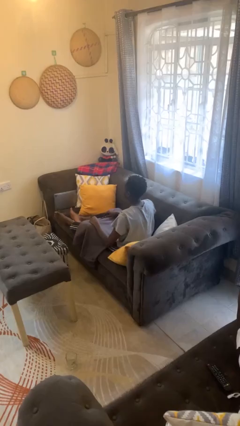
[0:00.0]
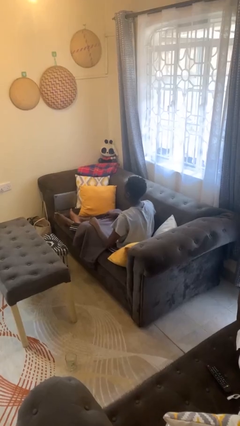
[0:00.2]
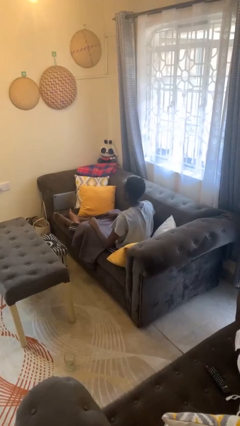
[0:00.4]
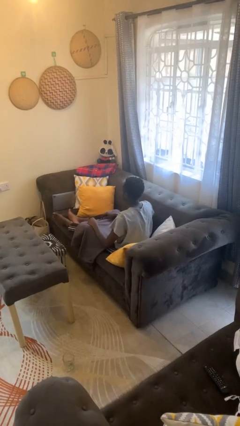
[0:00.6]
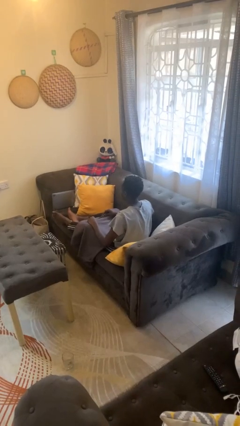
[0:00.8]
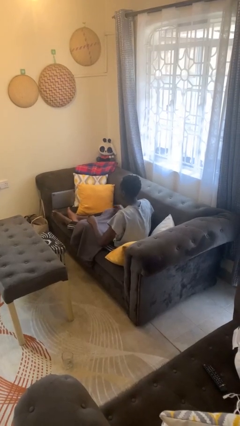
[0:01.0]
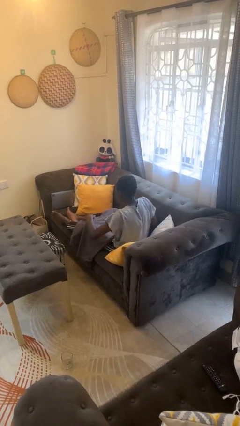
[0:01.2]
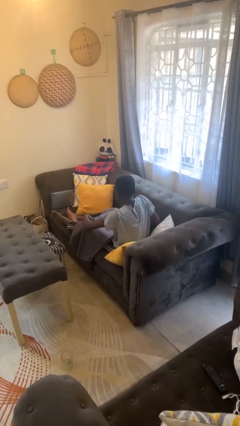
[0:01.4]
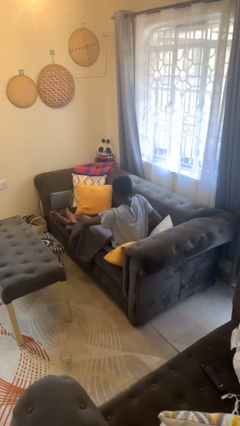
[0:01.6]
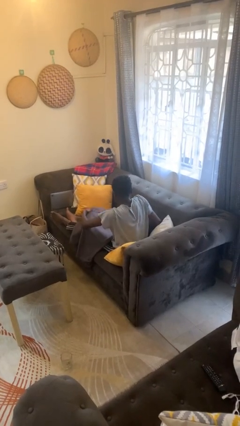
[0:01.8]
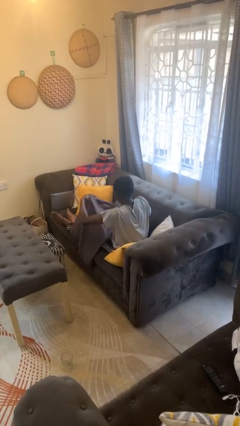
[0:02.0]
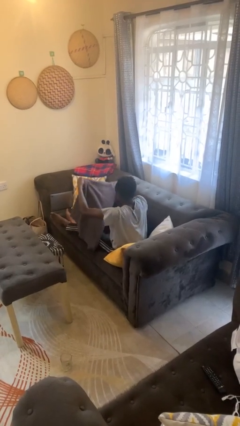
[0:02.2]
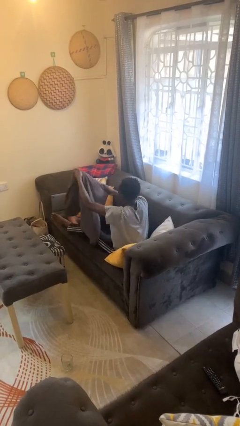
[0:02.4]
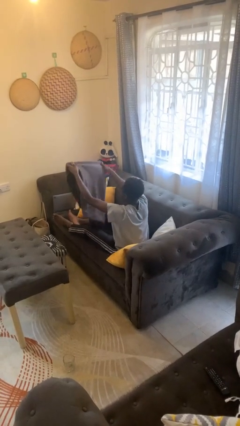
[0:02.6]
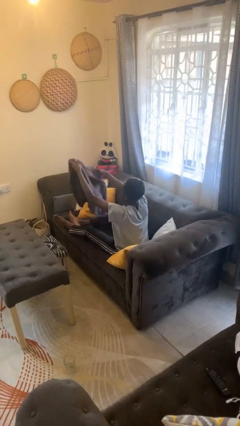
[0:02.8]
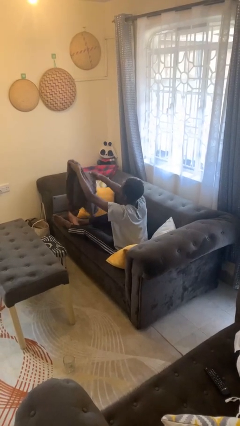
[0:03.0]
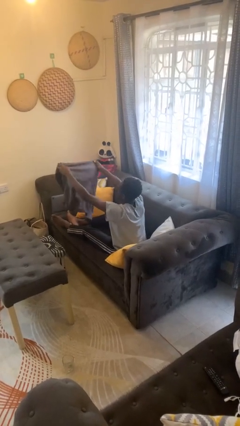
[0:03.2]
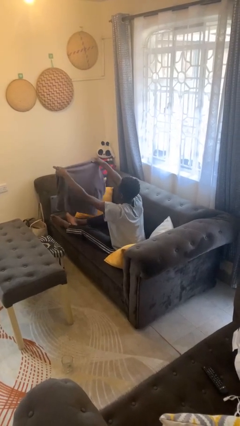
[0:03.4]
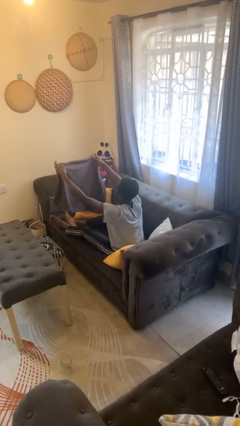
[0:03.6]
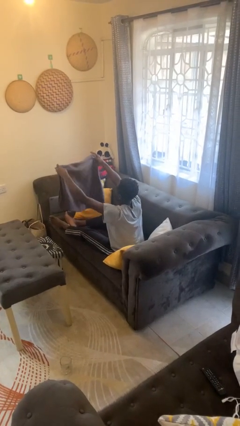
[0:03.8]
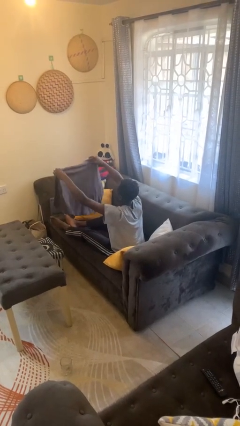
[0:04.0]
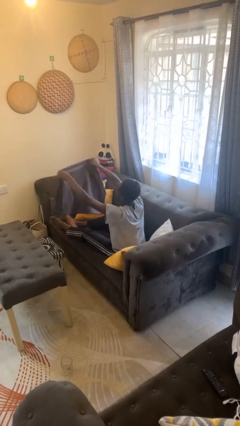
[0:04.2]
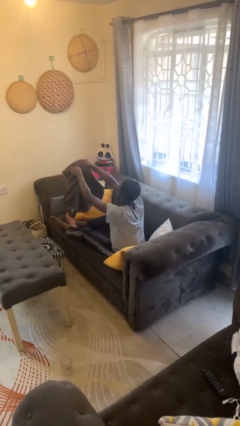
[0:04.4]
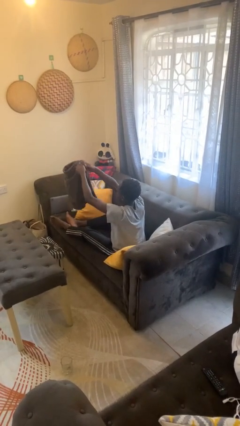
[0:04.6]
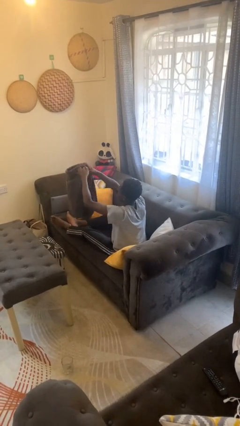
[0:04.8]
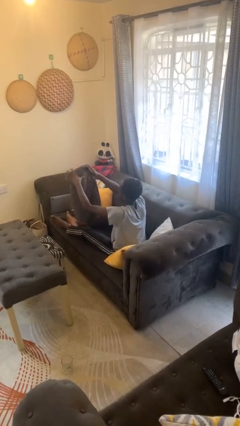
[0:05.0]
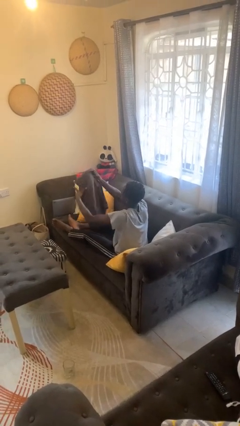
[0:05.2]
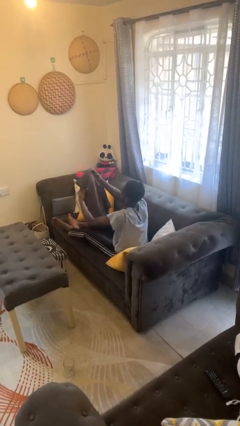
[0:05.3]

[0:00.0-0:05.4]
person folds blanket

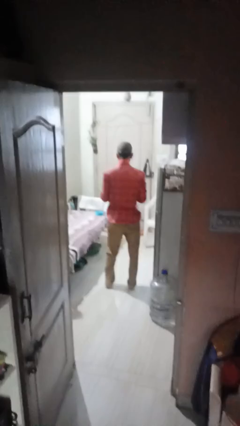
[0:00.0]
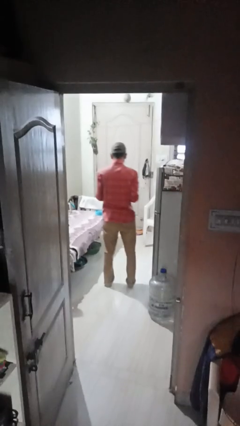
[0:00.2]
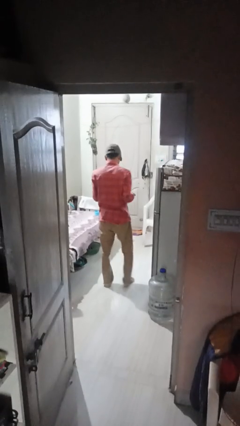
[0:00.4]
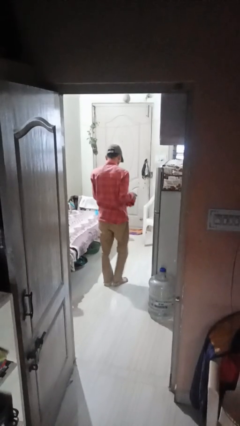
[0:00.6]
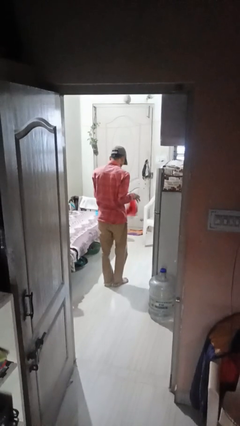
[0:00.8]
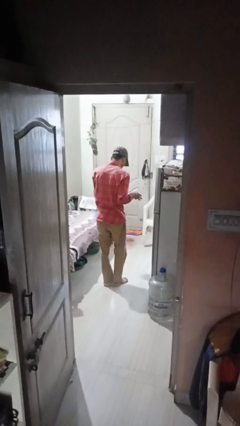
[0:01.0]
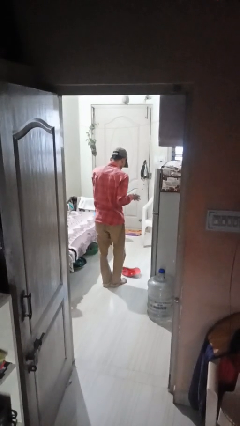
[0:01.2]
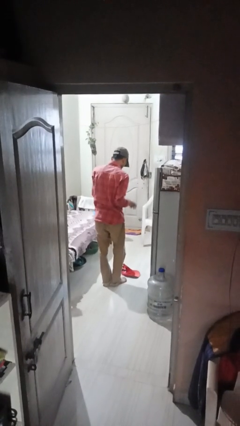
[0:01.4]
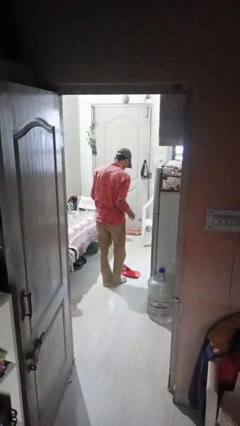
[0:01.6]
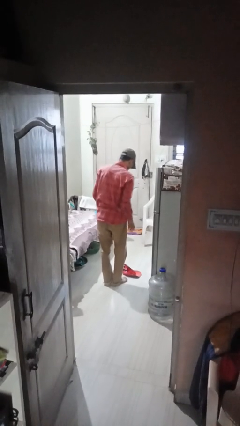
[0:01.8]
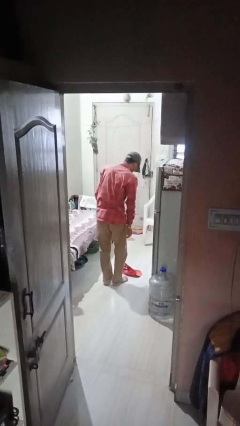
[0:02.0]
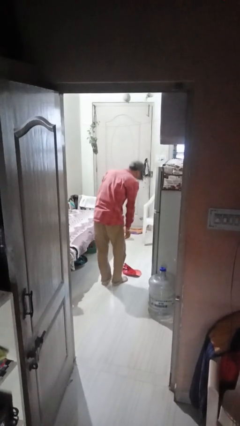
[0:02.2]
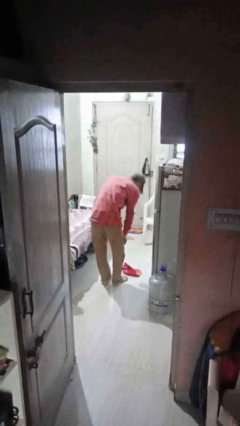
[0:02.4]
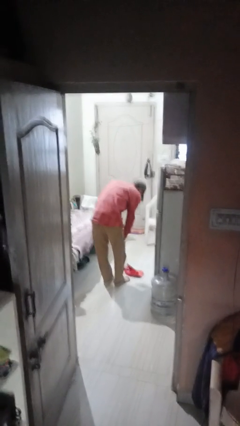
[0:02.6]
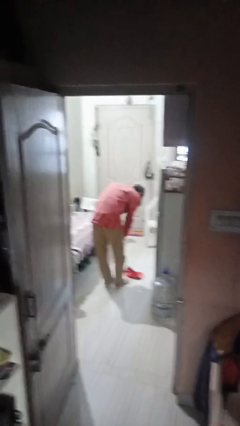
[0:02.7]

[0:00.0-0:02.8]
person drops object

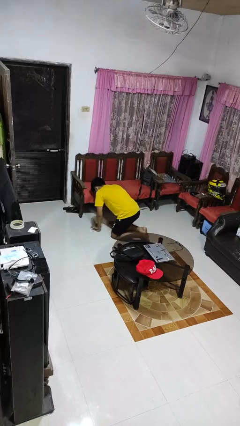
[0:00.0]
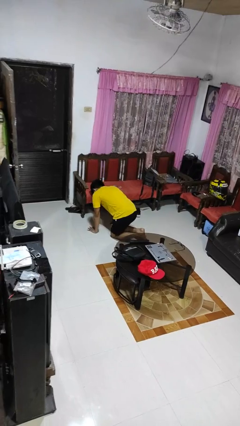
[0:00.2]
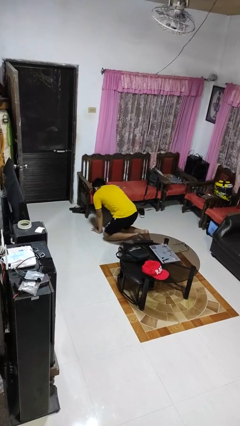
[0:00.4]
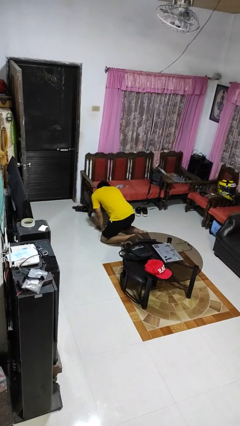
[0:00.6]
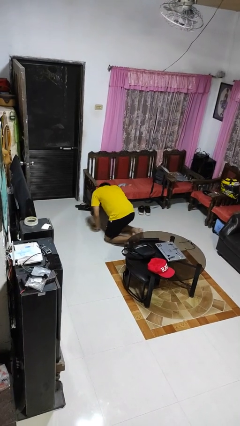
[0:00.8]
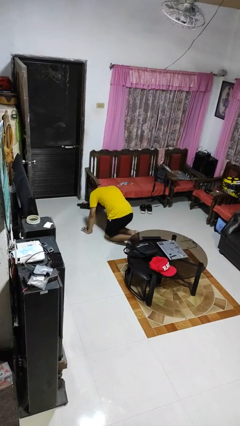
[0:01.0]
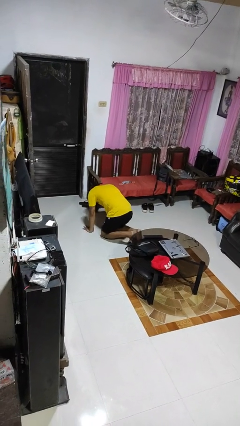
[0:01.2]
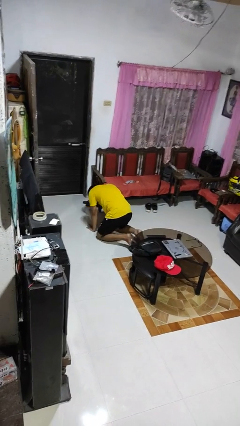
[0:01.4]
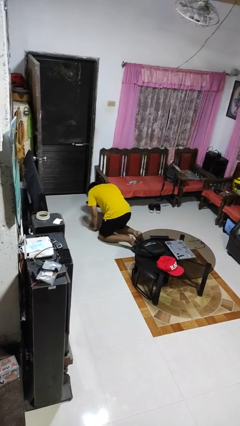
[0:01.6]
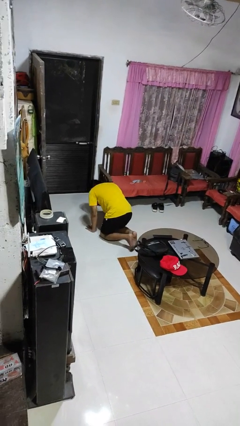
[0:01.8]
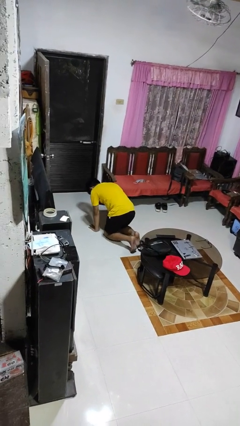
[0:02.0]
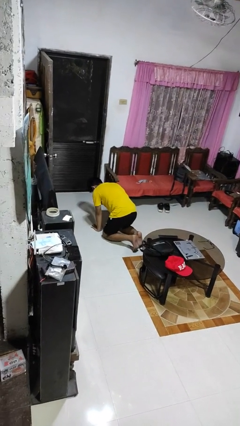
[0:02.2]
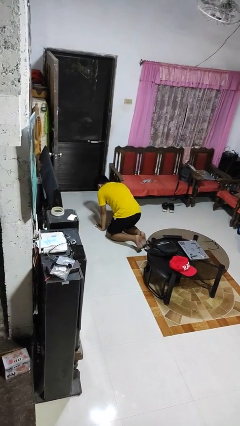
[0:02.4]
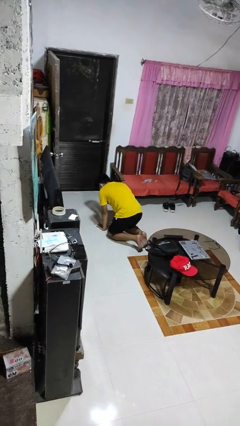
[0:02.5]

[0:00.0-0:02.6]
person crawls

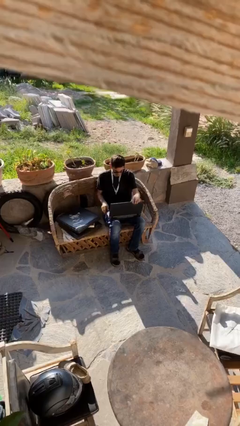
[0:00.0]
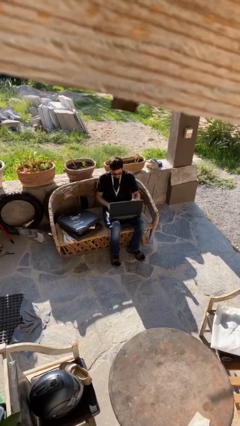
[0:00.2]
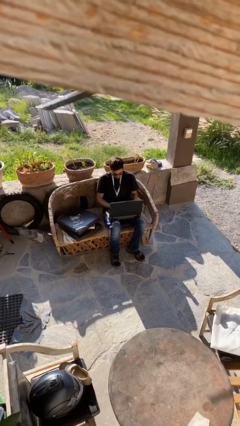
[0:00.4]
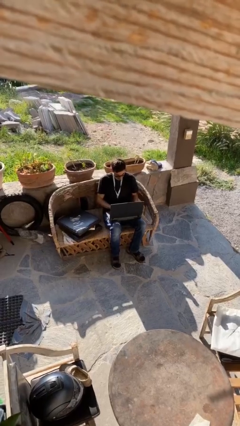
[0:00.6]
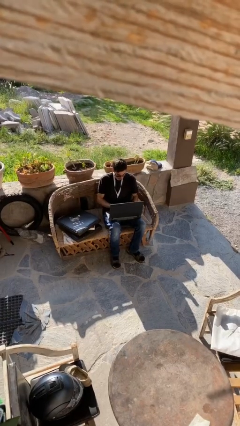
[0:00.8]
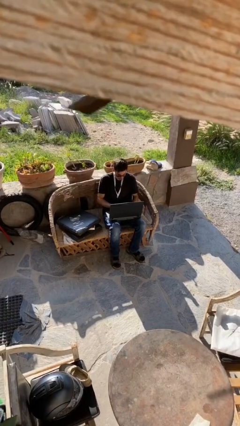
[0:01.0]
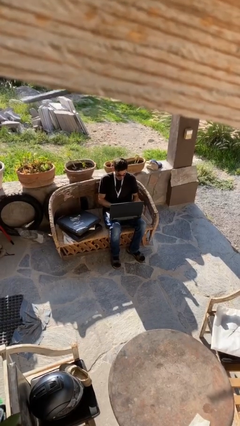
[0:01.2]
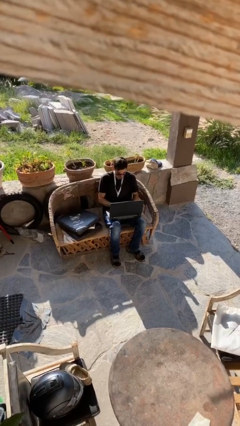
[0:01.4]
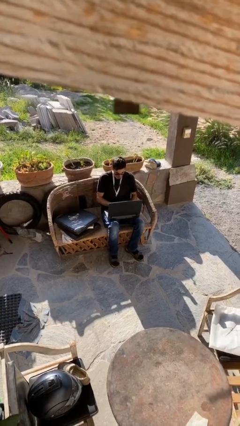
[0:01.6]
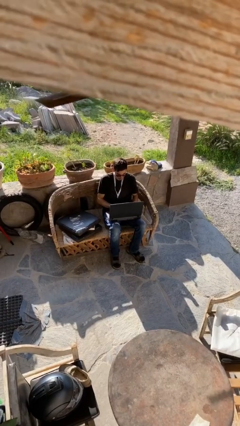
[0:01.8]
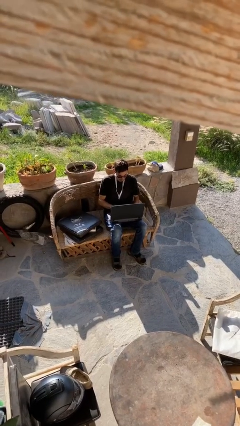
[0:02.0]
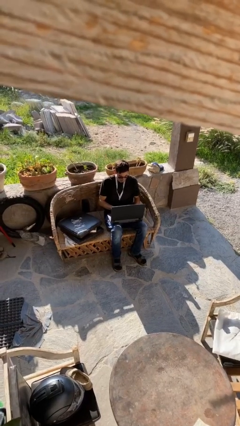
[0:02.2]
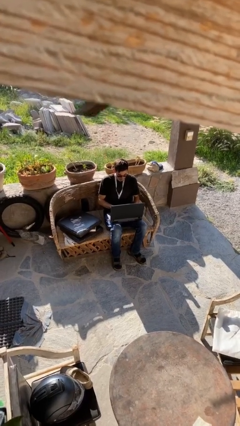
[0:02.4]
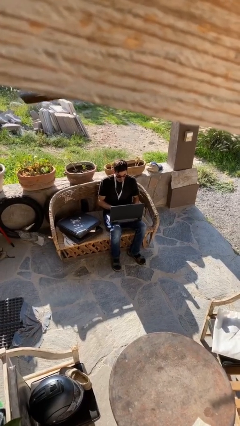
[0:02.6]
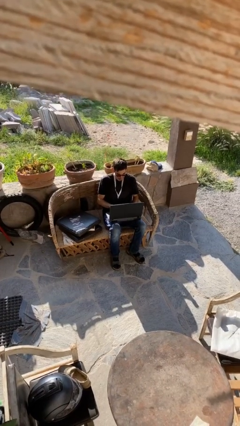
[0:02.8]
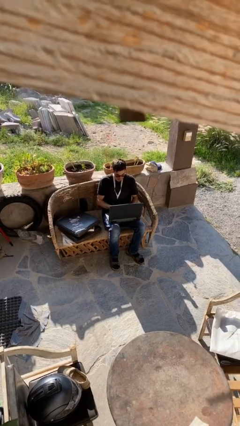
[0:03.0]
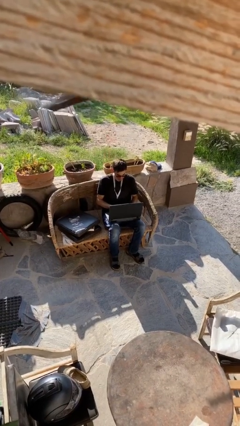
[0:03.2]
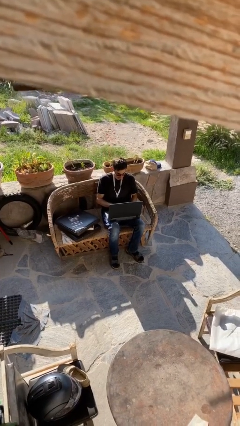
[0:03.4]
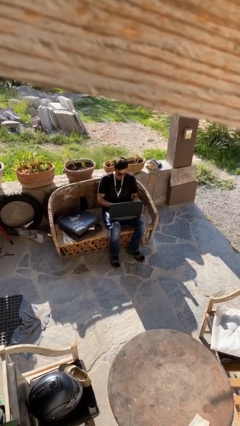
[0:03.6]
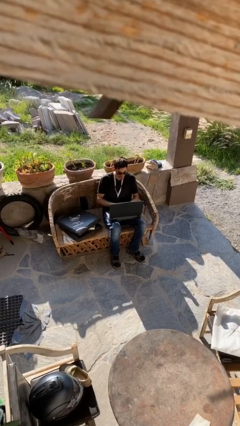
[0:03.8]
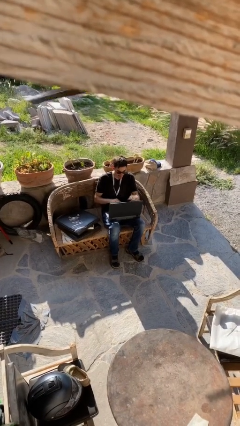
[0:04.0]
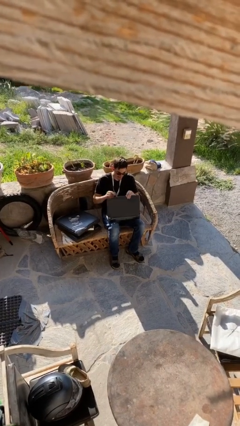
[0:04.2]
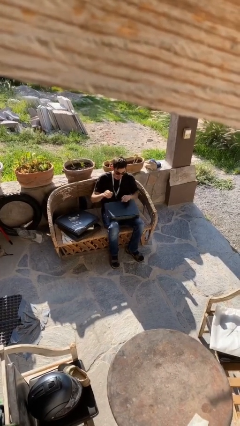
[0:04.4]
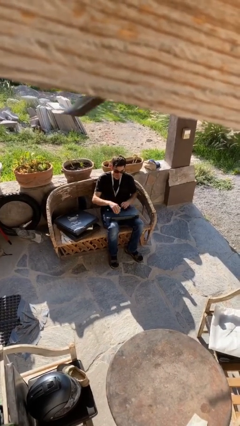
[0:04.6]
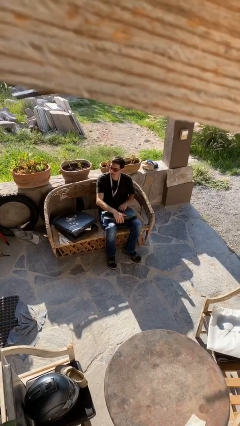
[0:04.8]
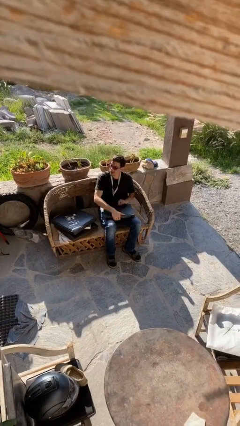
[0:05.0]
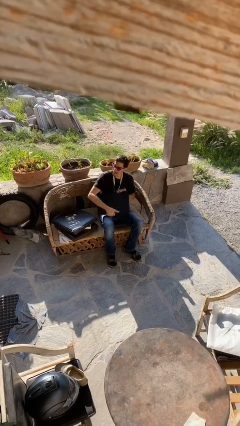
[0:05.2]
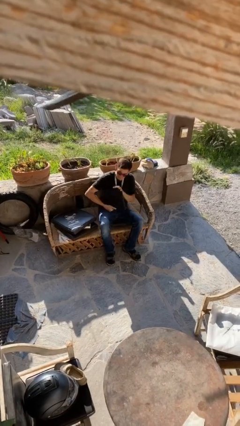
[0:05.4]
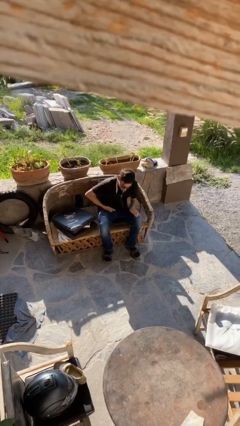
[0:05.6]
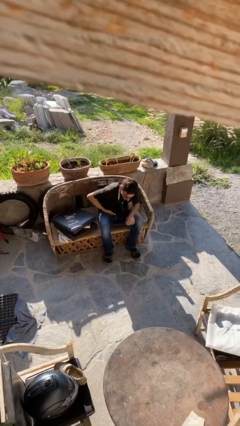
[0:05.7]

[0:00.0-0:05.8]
person interacts with laptop

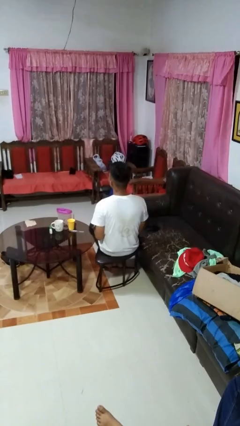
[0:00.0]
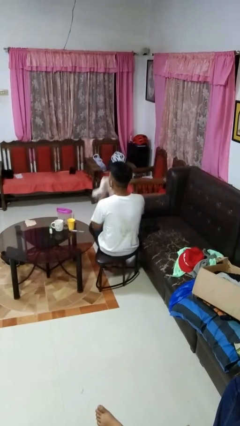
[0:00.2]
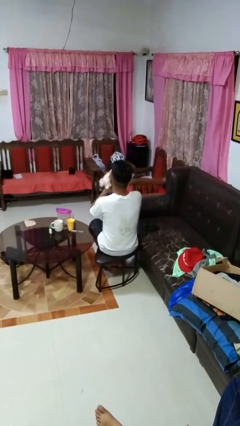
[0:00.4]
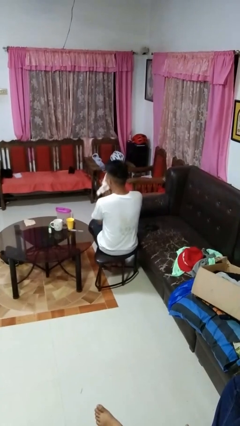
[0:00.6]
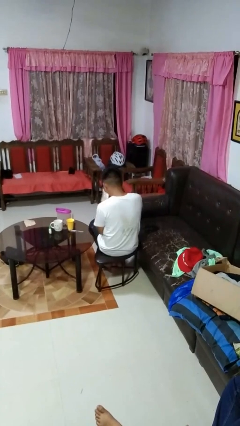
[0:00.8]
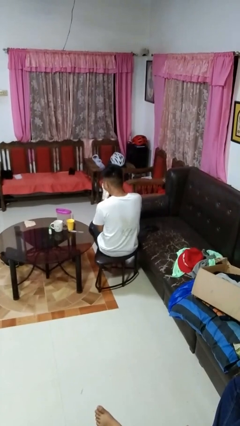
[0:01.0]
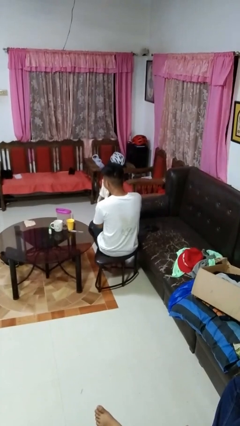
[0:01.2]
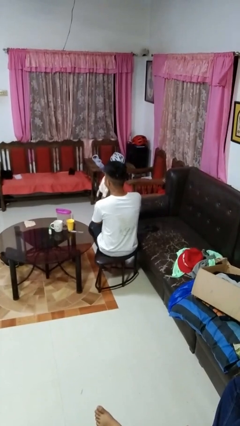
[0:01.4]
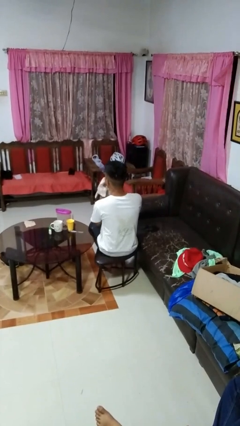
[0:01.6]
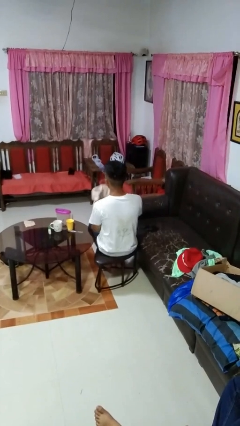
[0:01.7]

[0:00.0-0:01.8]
person blows nose
